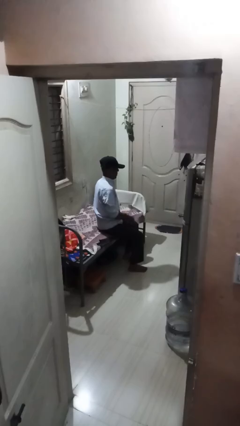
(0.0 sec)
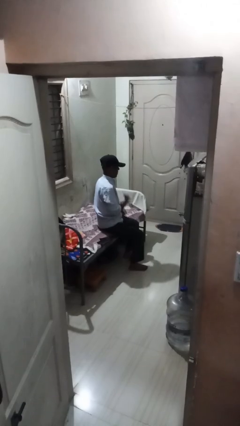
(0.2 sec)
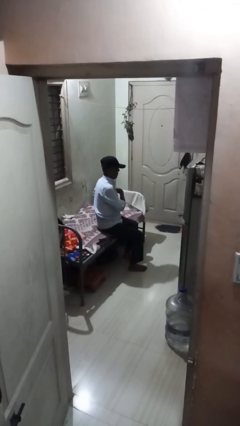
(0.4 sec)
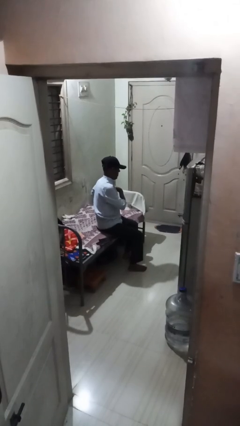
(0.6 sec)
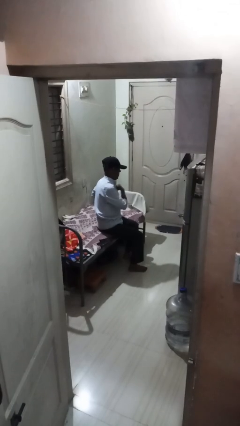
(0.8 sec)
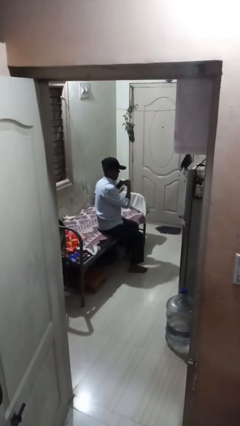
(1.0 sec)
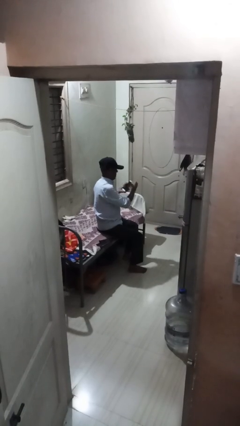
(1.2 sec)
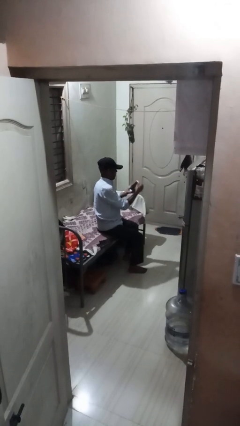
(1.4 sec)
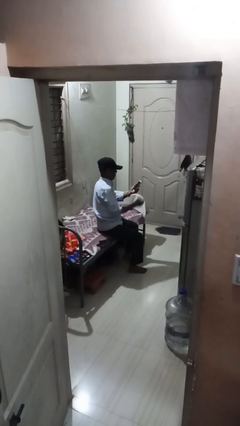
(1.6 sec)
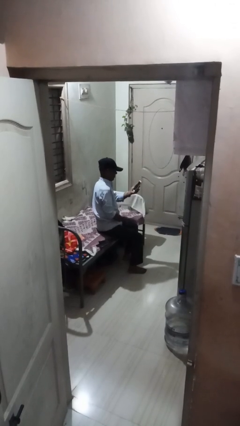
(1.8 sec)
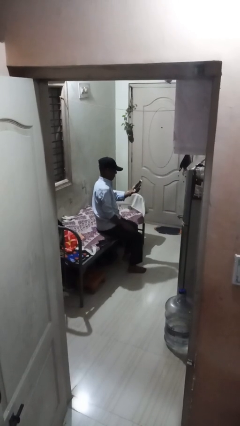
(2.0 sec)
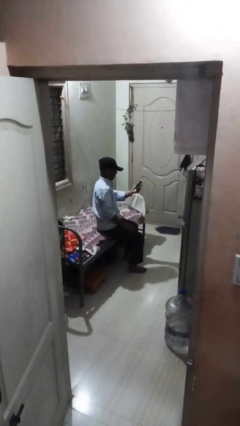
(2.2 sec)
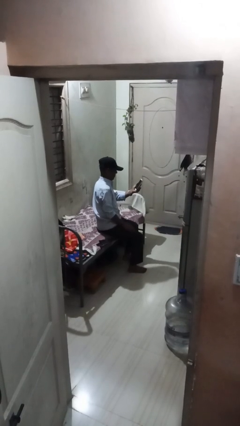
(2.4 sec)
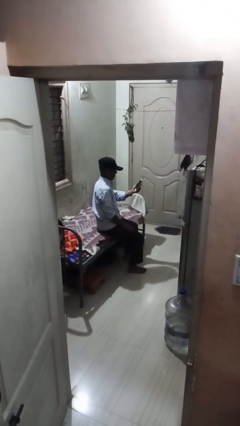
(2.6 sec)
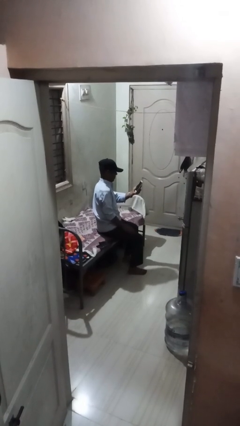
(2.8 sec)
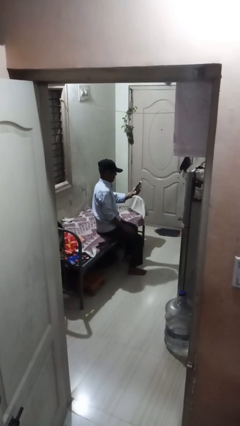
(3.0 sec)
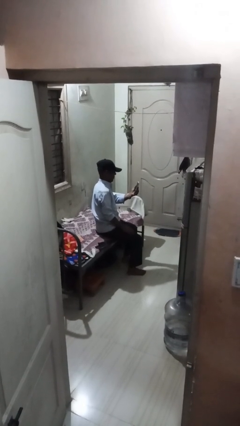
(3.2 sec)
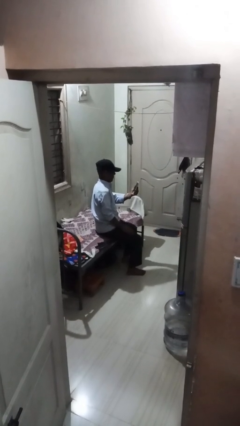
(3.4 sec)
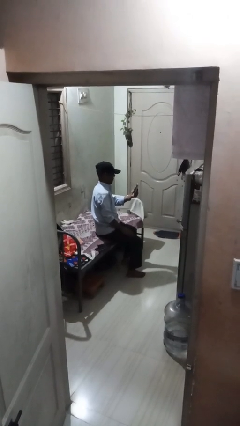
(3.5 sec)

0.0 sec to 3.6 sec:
person takes phone from pocket

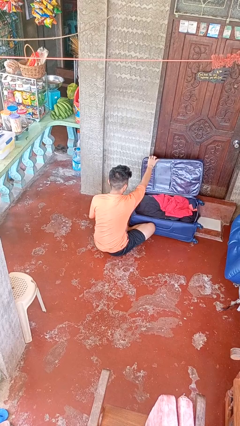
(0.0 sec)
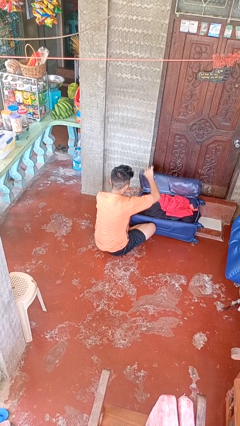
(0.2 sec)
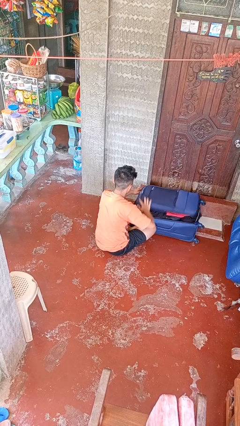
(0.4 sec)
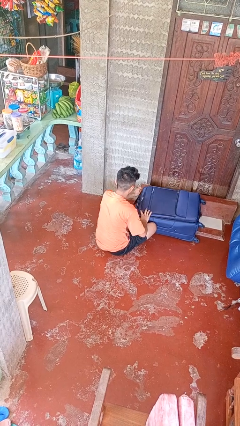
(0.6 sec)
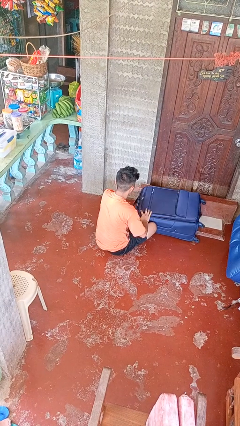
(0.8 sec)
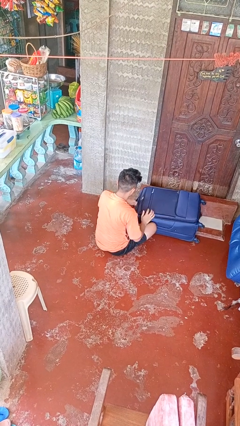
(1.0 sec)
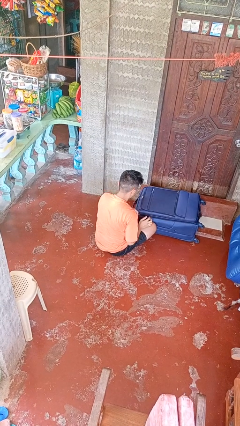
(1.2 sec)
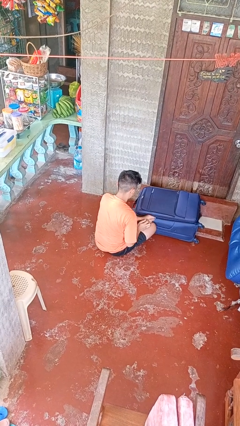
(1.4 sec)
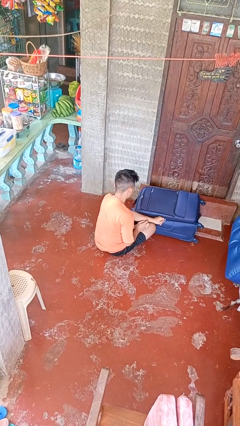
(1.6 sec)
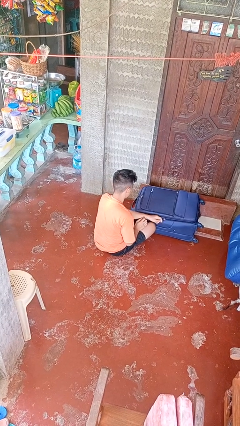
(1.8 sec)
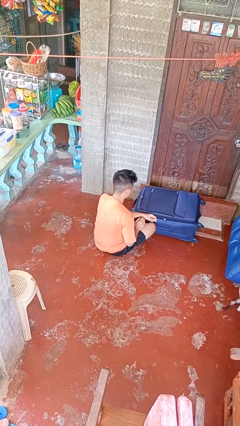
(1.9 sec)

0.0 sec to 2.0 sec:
person closes suitcase

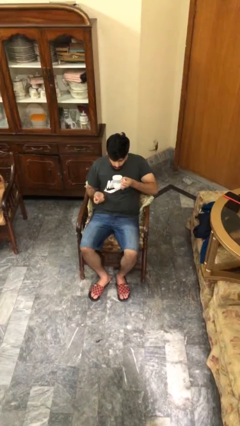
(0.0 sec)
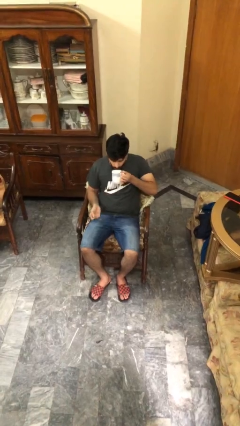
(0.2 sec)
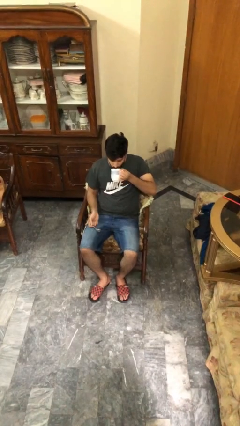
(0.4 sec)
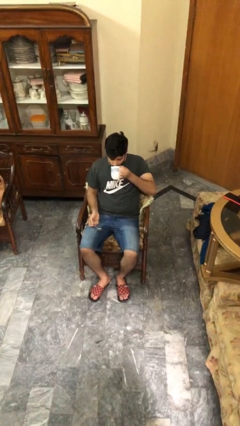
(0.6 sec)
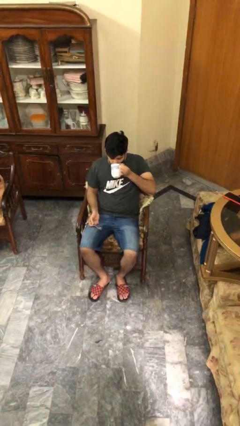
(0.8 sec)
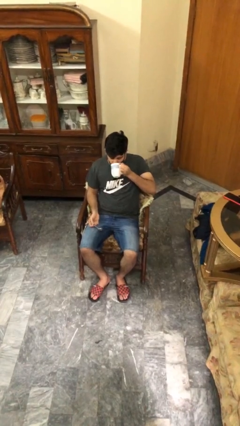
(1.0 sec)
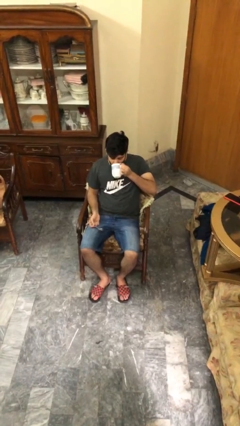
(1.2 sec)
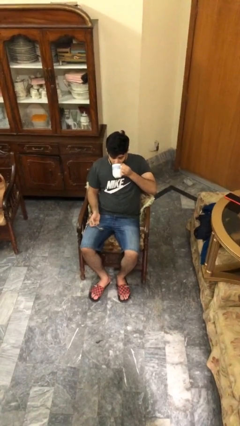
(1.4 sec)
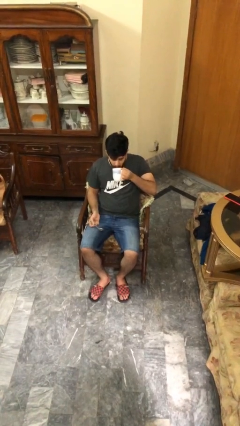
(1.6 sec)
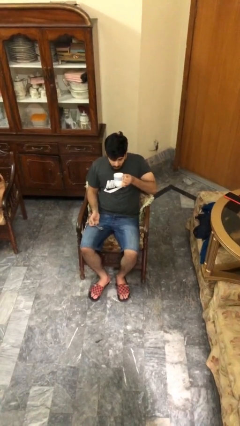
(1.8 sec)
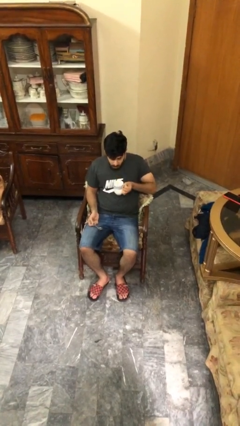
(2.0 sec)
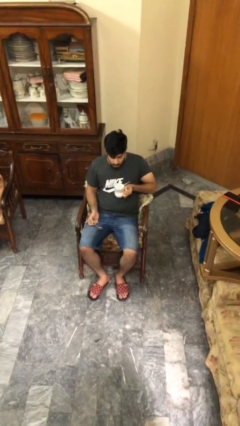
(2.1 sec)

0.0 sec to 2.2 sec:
person drinks from mug

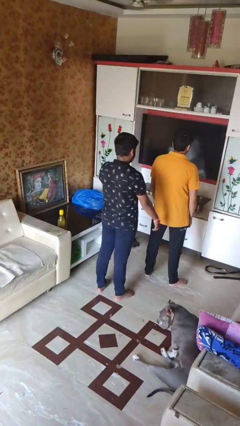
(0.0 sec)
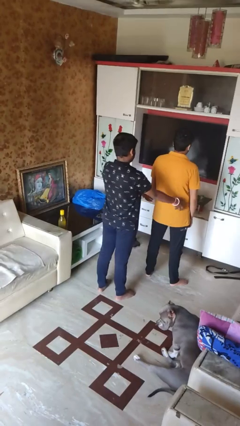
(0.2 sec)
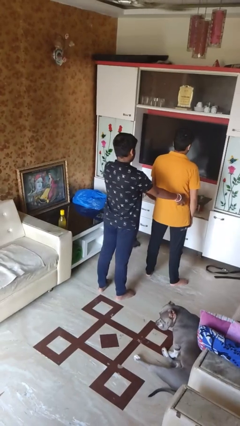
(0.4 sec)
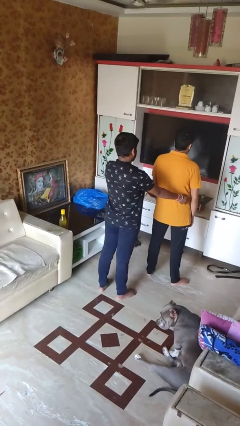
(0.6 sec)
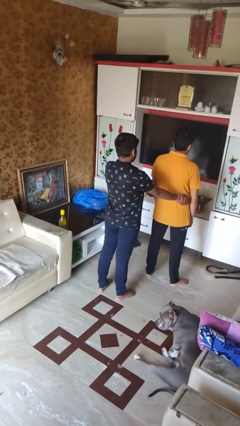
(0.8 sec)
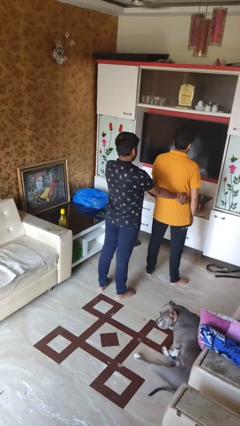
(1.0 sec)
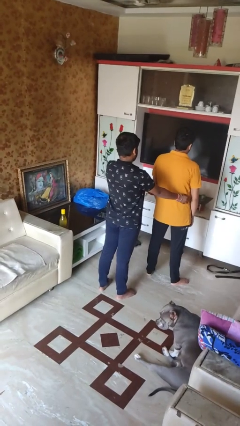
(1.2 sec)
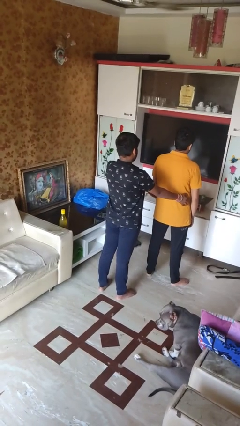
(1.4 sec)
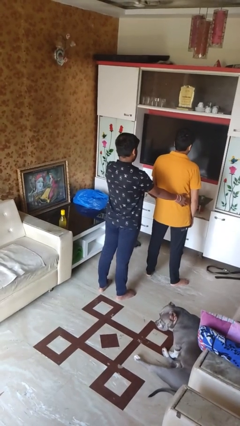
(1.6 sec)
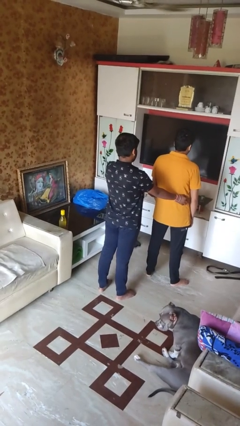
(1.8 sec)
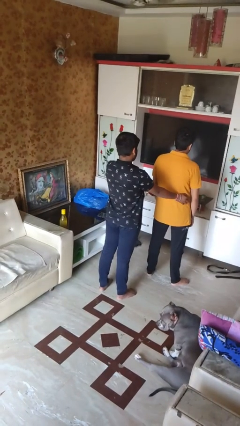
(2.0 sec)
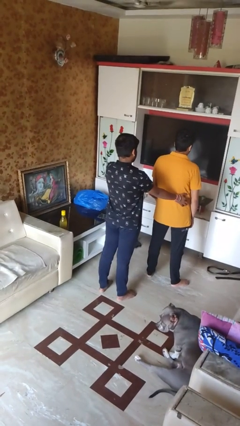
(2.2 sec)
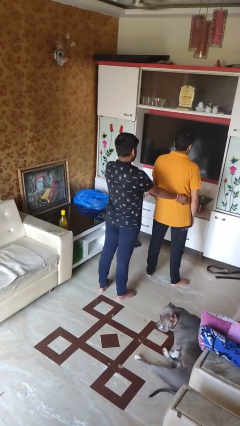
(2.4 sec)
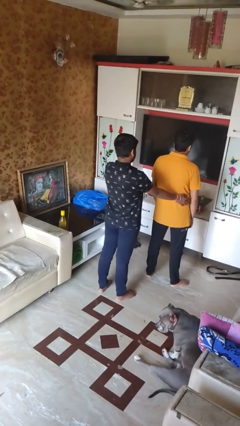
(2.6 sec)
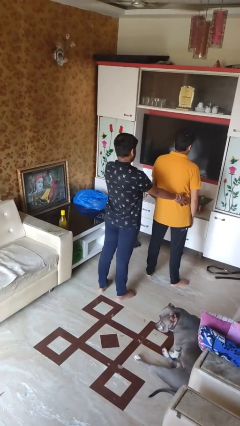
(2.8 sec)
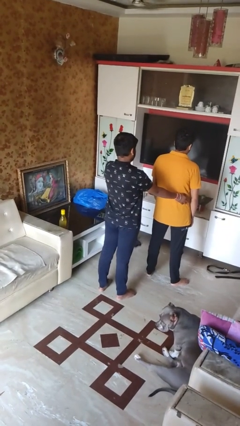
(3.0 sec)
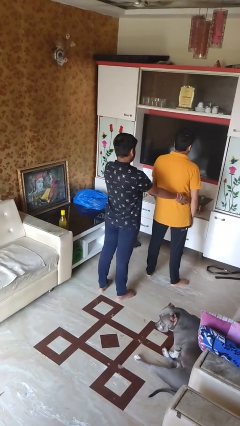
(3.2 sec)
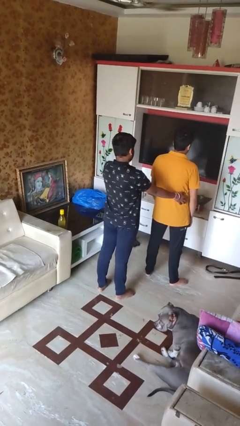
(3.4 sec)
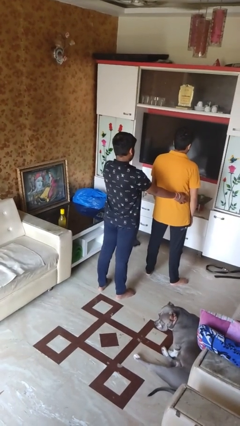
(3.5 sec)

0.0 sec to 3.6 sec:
person tickles person

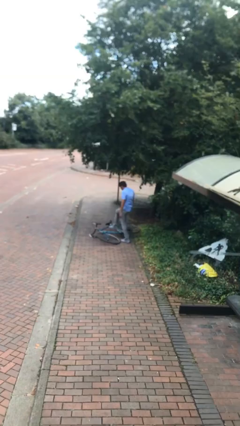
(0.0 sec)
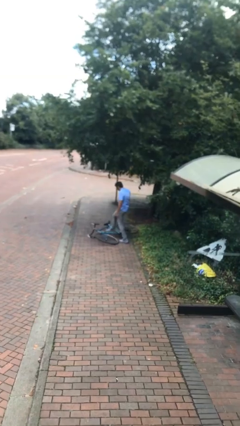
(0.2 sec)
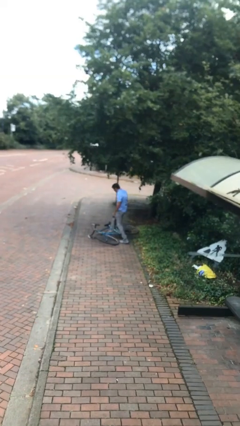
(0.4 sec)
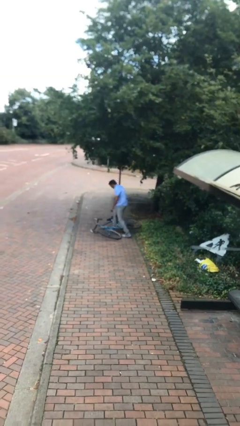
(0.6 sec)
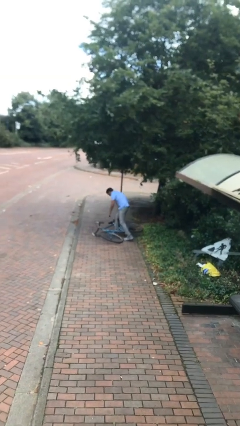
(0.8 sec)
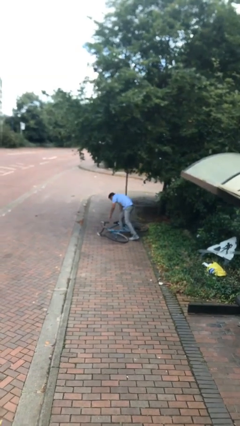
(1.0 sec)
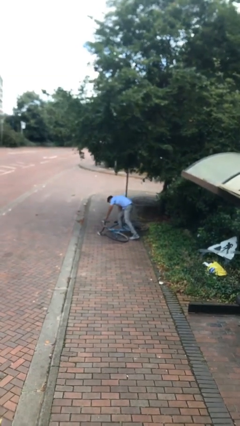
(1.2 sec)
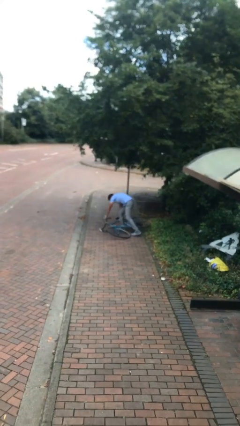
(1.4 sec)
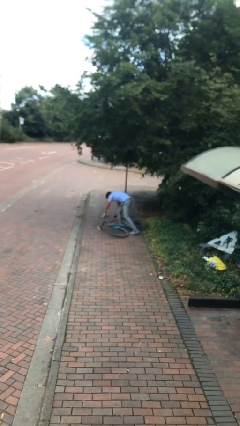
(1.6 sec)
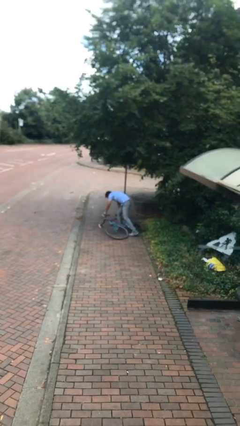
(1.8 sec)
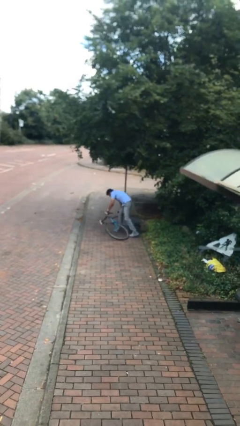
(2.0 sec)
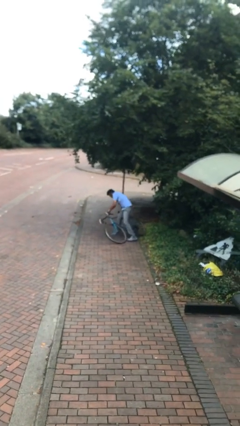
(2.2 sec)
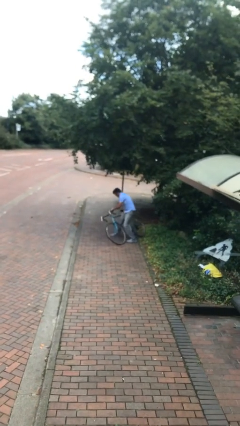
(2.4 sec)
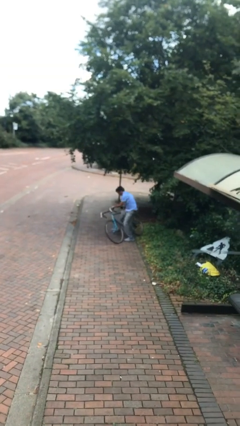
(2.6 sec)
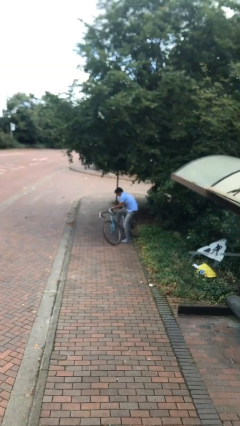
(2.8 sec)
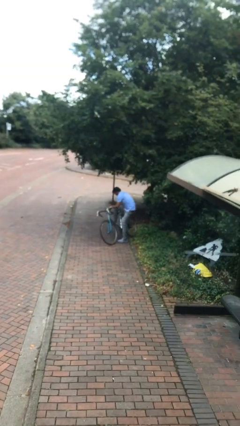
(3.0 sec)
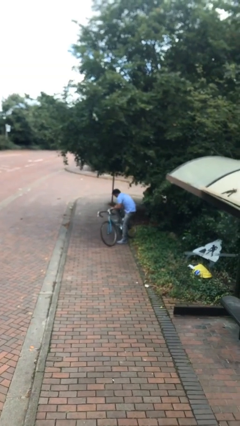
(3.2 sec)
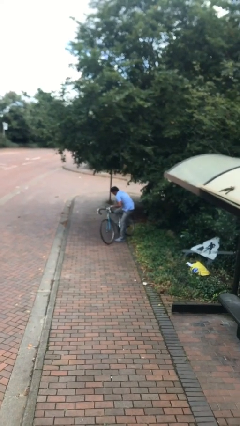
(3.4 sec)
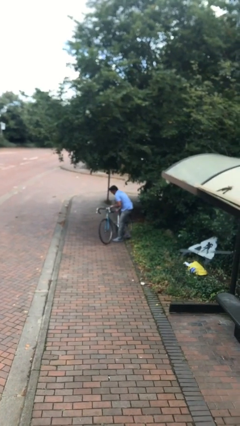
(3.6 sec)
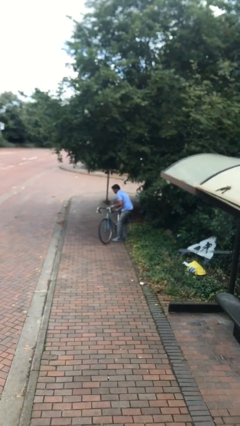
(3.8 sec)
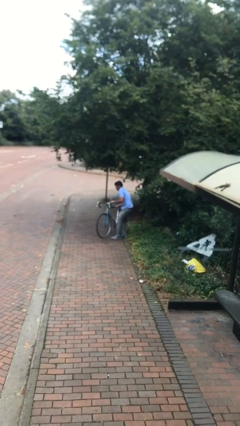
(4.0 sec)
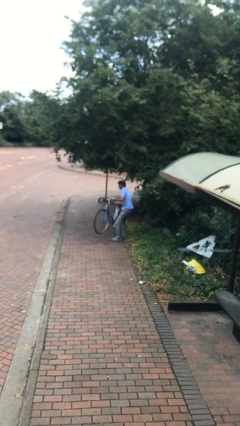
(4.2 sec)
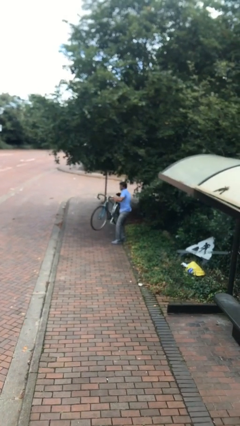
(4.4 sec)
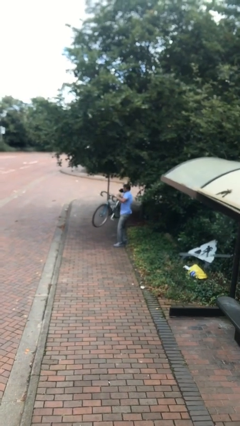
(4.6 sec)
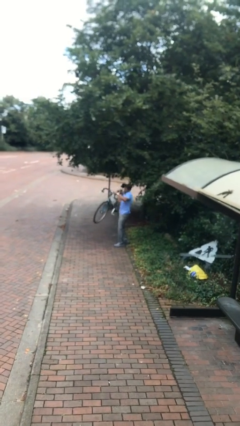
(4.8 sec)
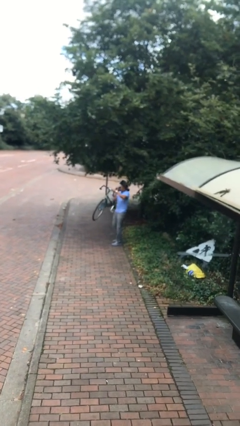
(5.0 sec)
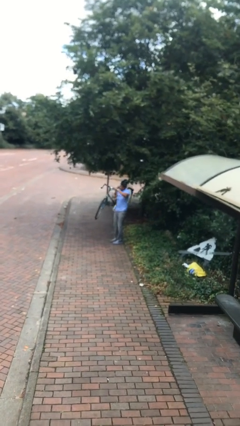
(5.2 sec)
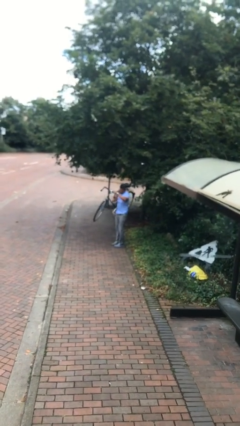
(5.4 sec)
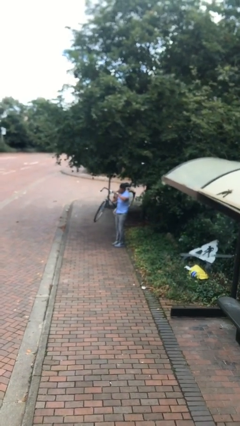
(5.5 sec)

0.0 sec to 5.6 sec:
person picks up object from floor

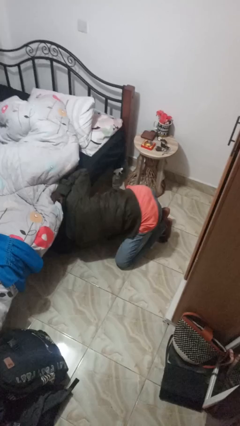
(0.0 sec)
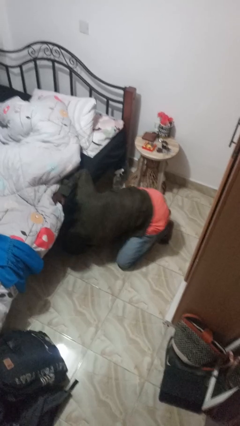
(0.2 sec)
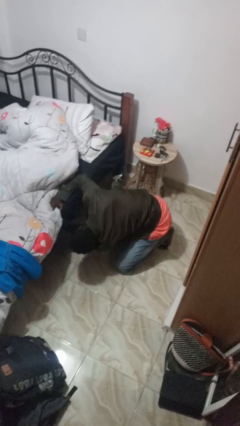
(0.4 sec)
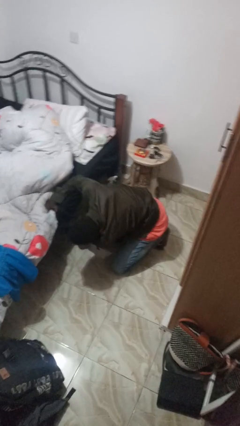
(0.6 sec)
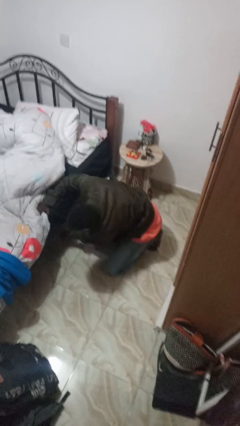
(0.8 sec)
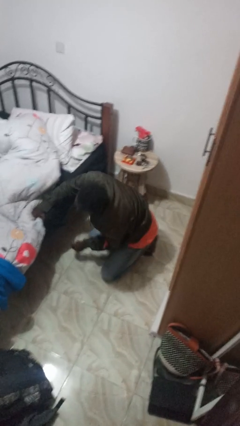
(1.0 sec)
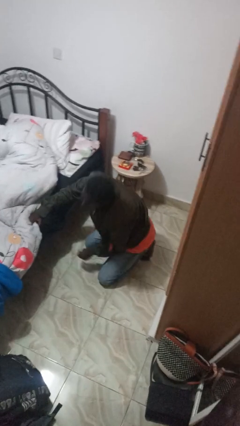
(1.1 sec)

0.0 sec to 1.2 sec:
person searches under bed
